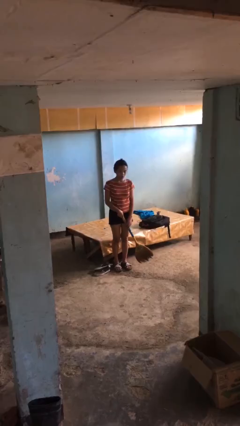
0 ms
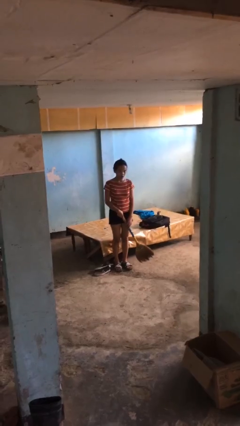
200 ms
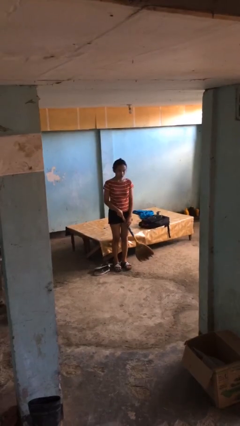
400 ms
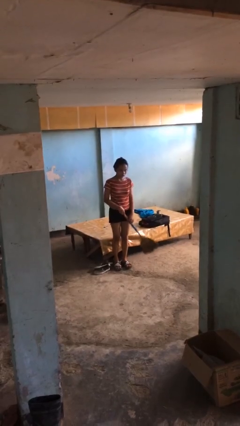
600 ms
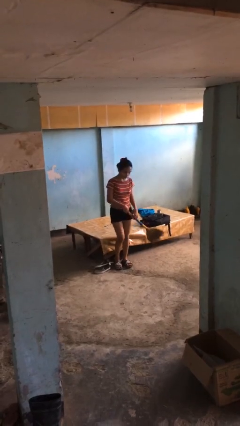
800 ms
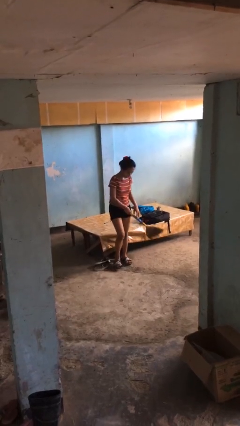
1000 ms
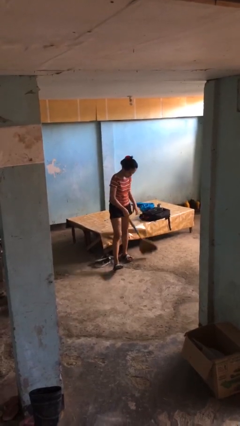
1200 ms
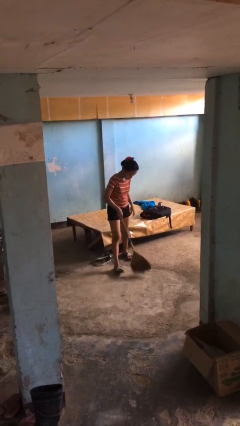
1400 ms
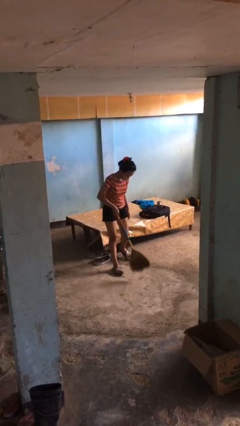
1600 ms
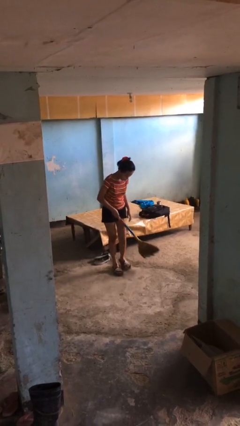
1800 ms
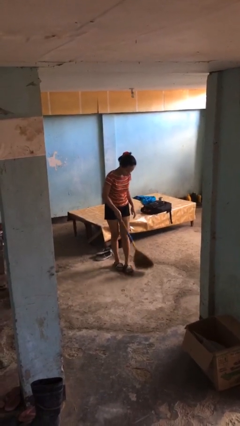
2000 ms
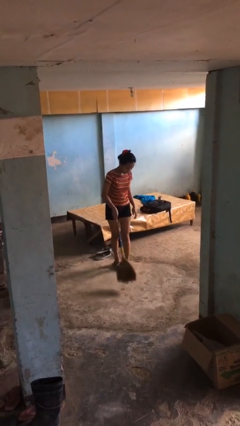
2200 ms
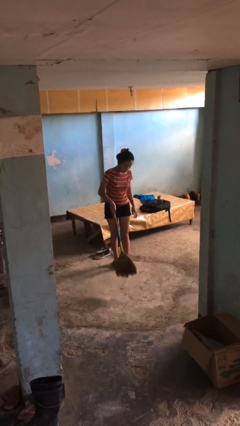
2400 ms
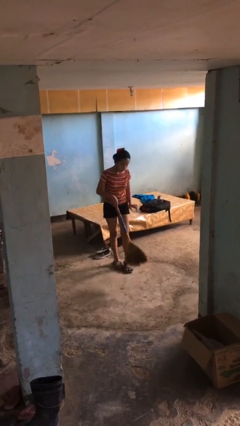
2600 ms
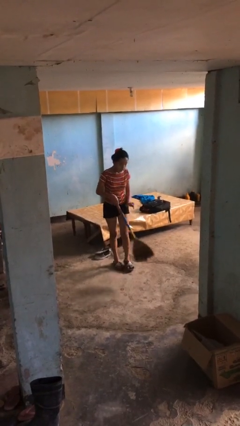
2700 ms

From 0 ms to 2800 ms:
person sweeps floor

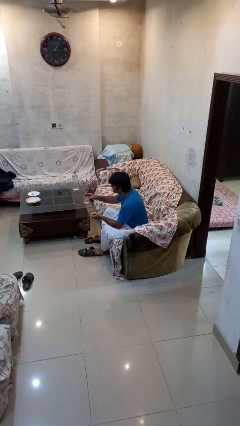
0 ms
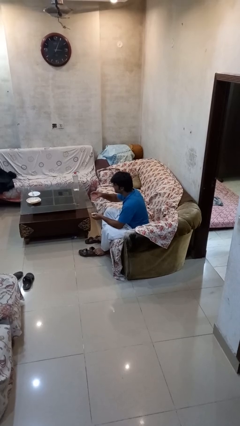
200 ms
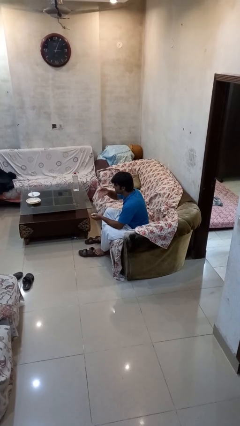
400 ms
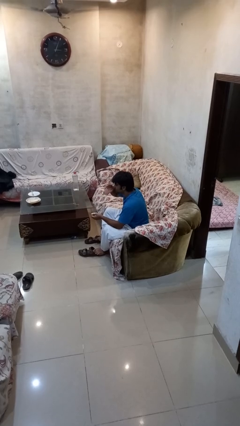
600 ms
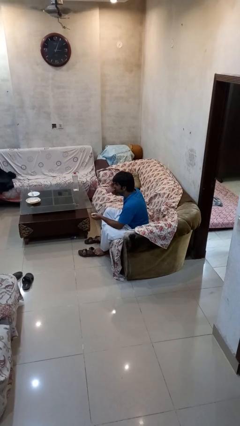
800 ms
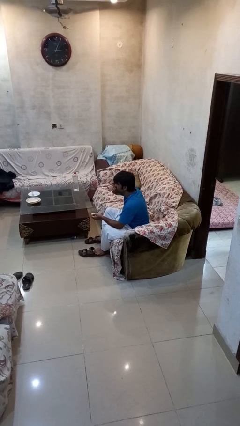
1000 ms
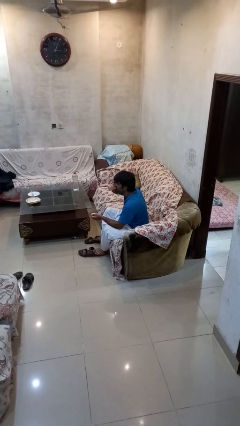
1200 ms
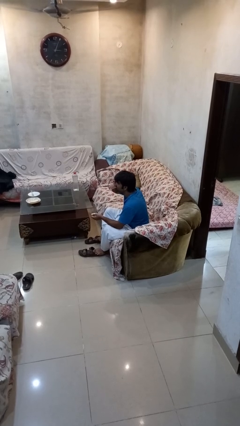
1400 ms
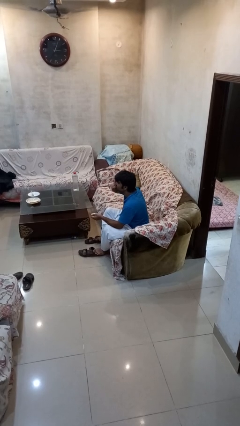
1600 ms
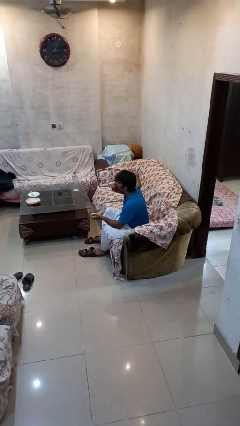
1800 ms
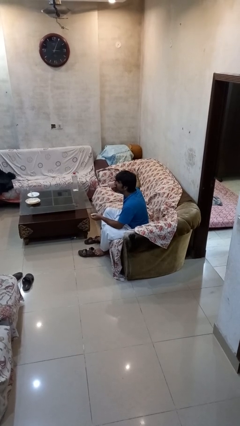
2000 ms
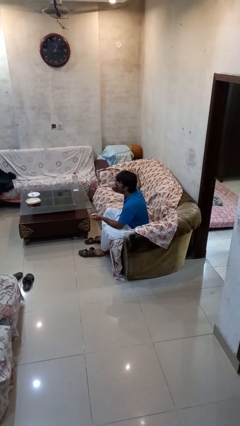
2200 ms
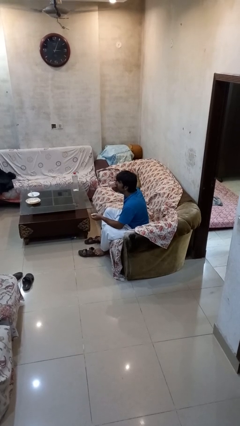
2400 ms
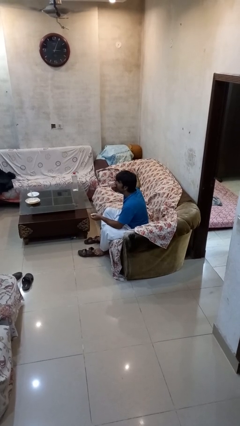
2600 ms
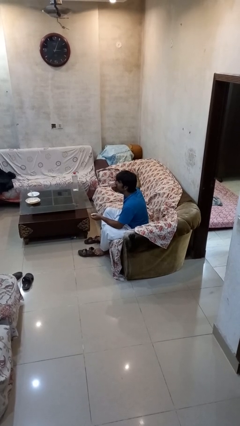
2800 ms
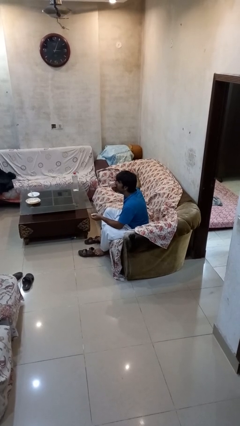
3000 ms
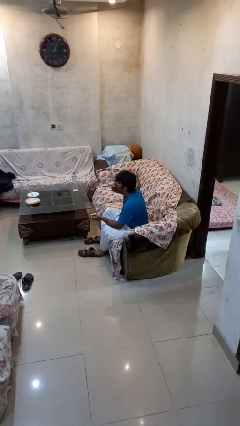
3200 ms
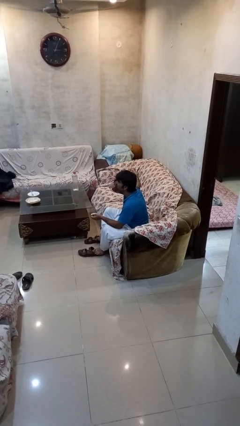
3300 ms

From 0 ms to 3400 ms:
person drinks from cup

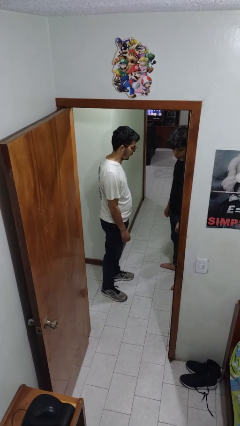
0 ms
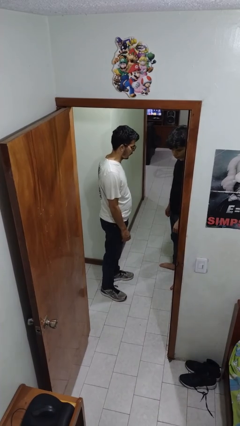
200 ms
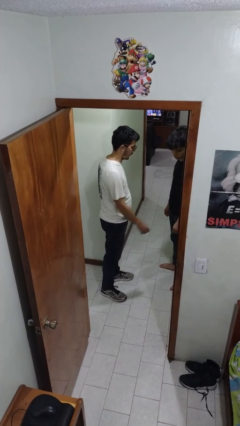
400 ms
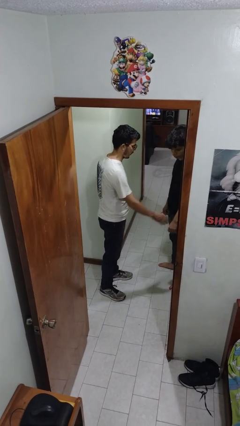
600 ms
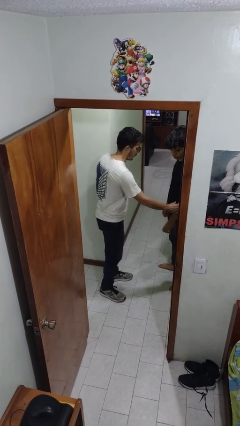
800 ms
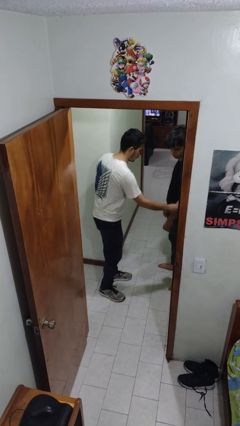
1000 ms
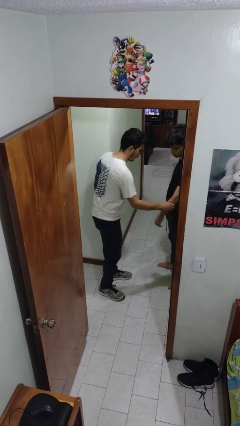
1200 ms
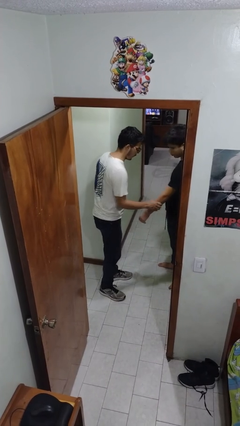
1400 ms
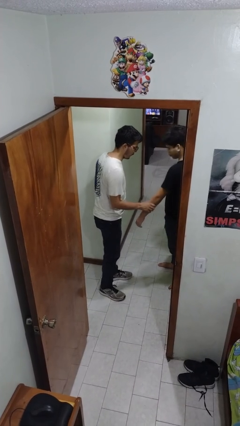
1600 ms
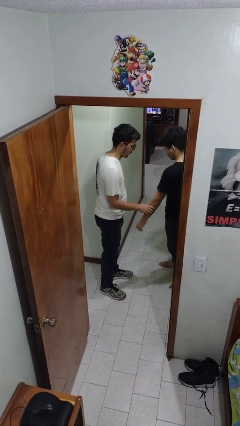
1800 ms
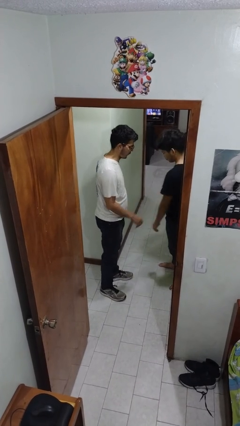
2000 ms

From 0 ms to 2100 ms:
person grabs person by forearm

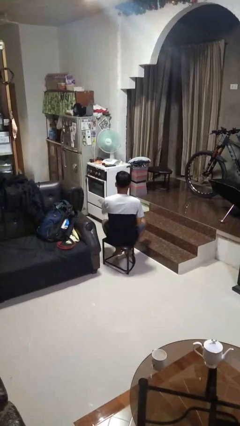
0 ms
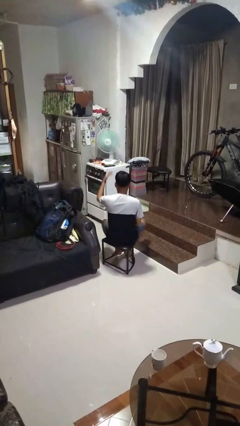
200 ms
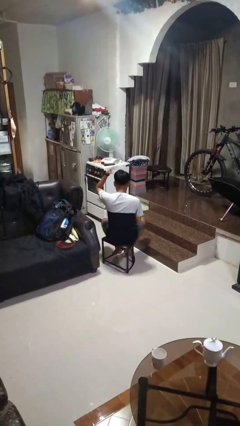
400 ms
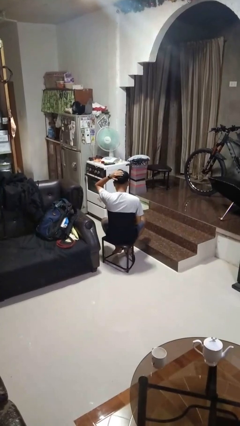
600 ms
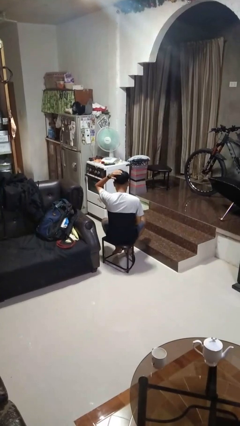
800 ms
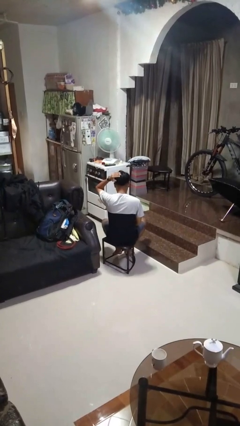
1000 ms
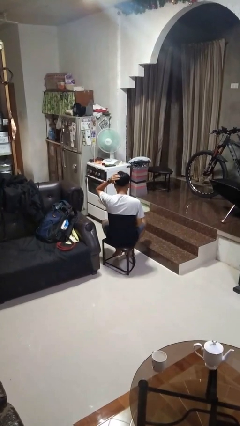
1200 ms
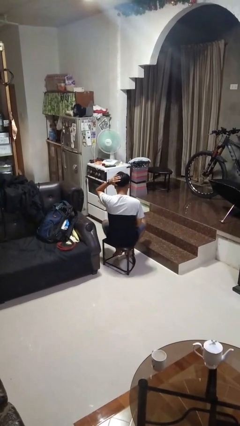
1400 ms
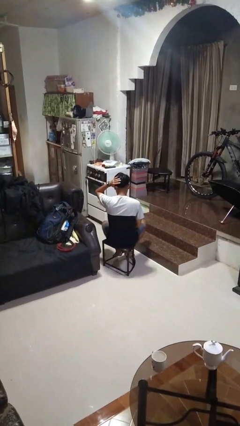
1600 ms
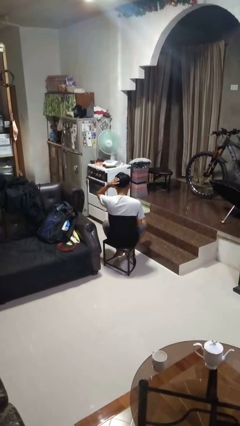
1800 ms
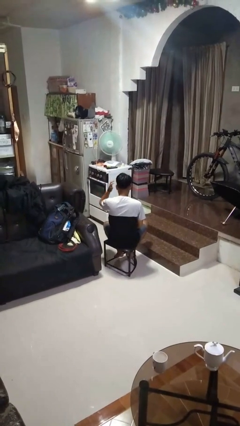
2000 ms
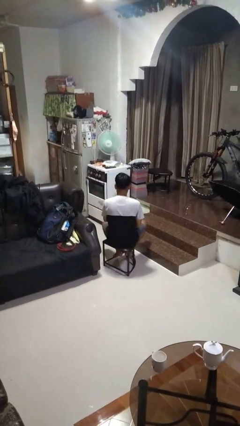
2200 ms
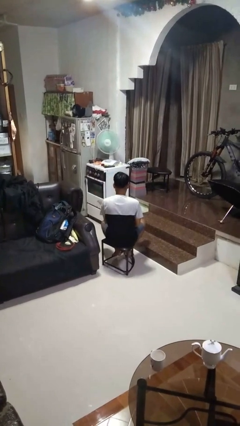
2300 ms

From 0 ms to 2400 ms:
person pats head

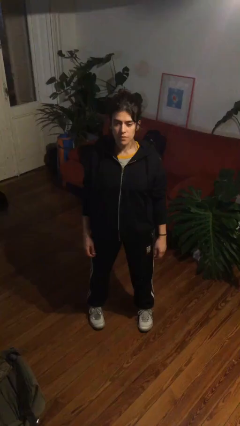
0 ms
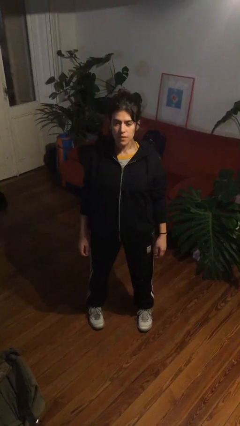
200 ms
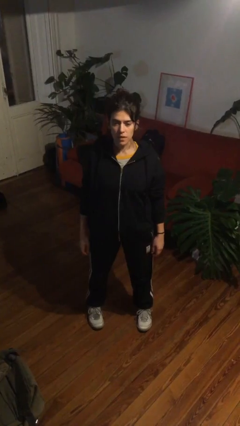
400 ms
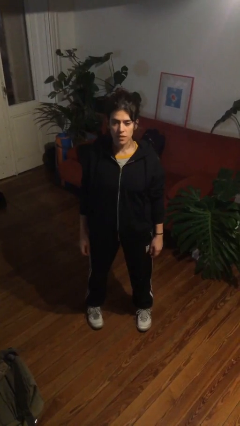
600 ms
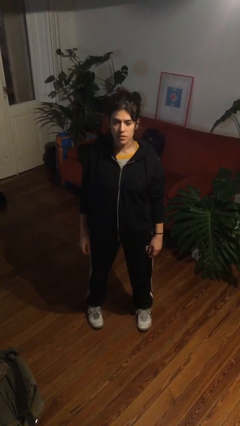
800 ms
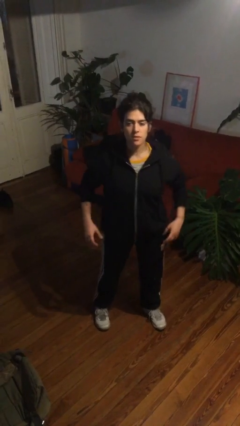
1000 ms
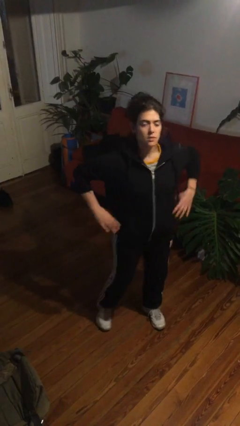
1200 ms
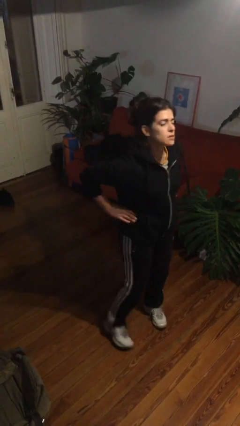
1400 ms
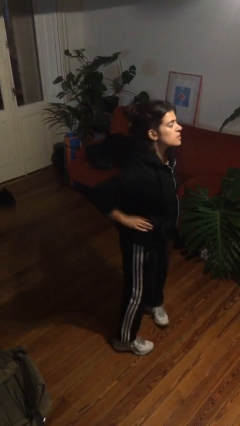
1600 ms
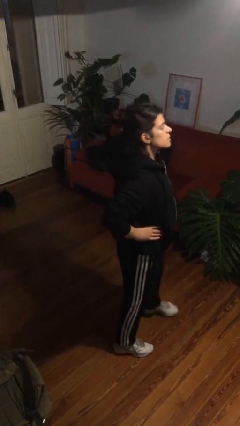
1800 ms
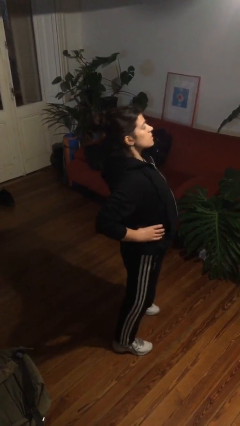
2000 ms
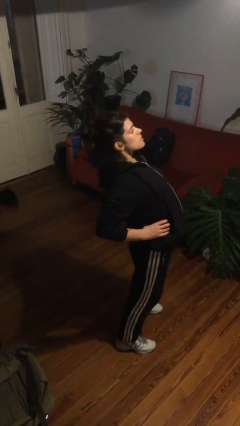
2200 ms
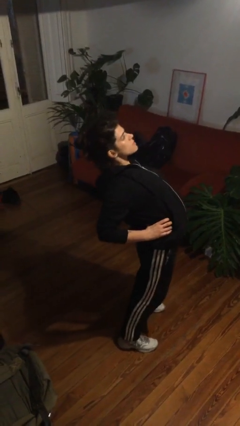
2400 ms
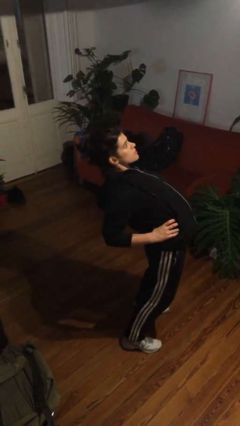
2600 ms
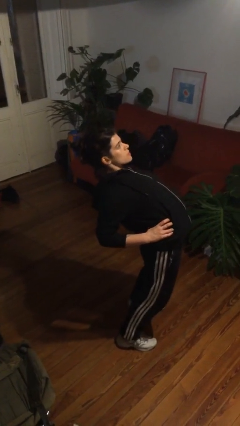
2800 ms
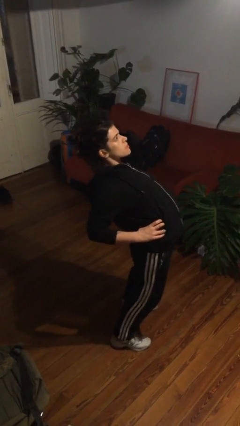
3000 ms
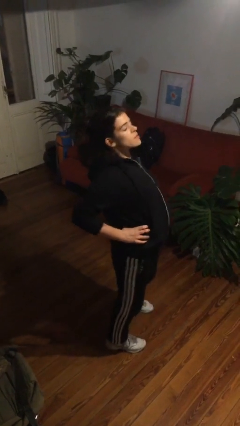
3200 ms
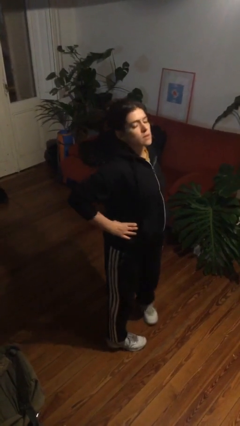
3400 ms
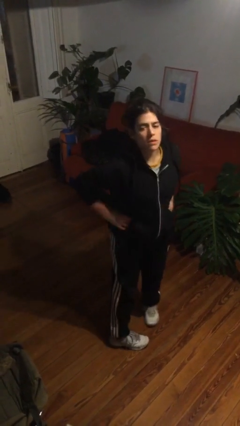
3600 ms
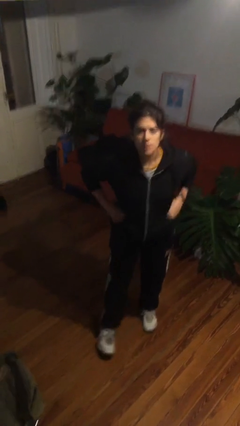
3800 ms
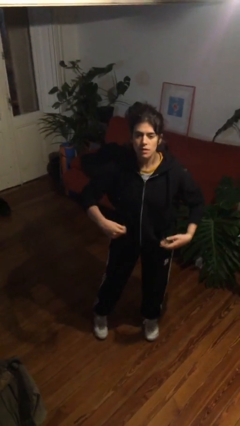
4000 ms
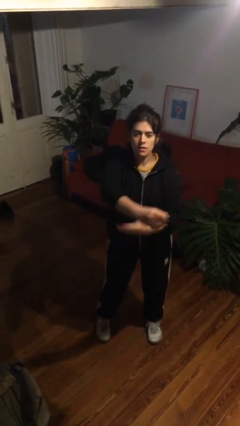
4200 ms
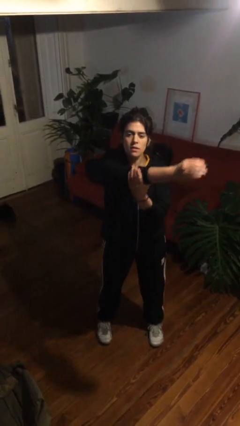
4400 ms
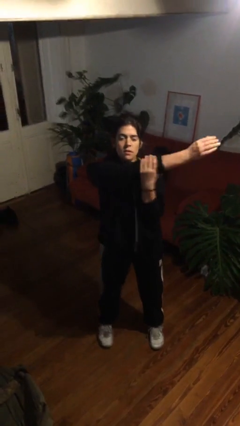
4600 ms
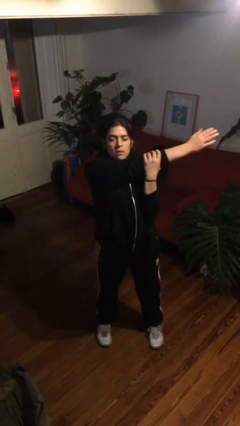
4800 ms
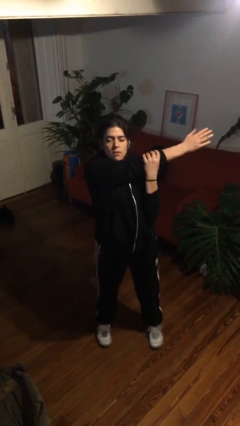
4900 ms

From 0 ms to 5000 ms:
person stretches back

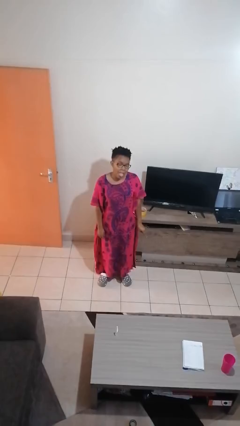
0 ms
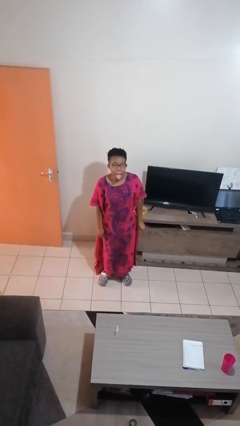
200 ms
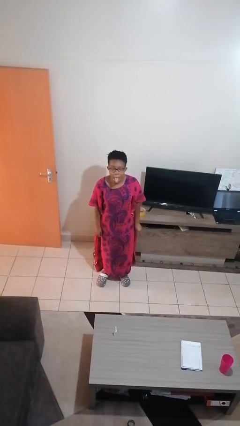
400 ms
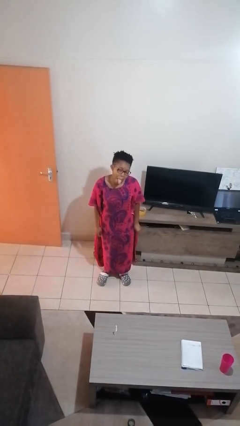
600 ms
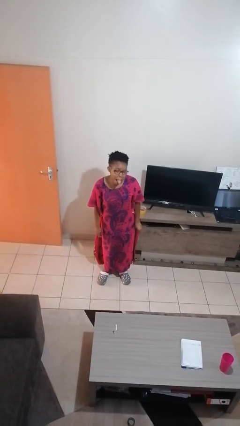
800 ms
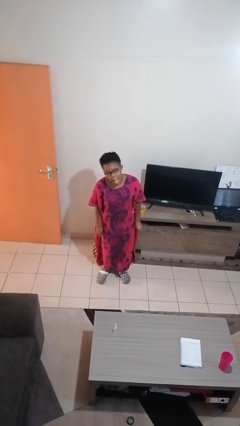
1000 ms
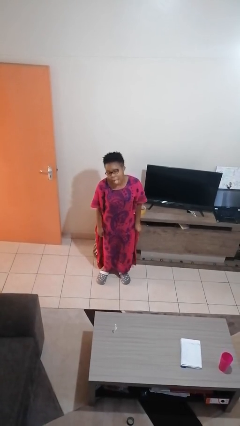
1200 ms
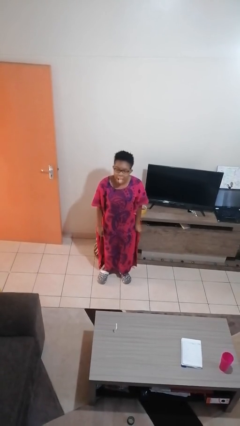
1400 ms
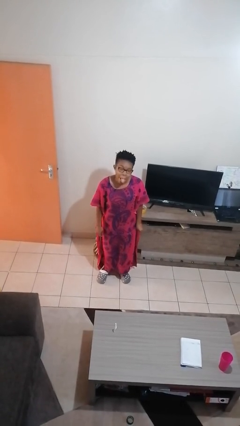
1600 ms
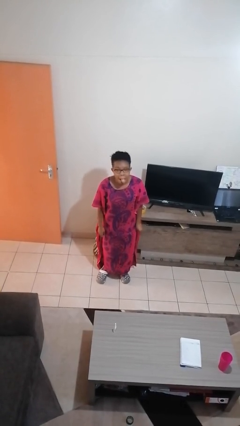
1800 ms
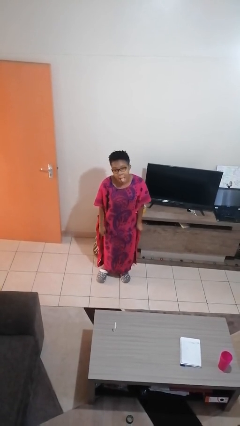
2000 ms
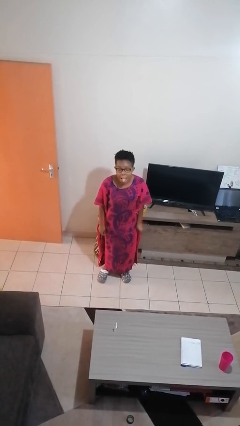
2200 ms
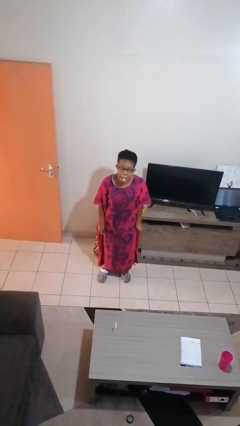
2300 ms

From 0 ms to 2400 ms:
person sticks out tongue
